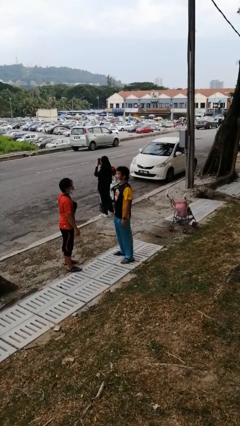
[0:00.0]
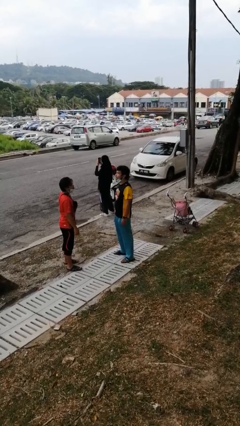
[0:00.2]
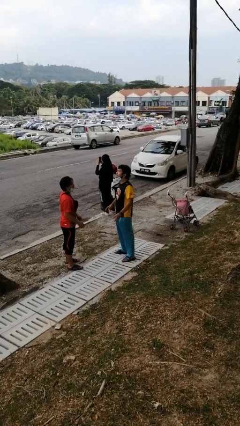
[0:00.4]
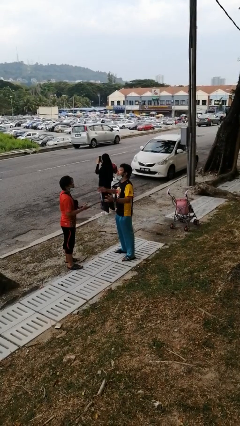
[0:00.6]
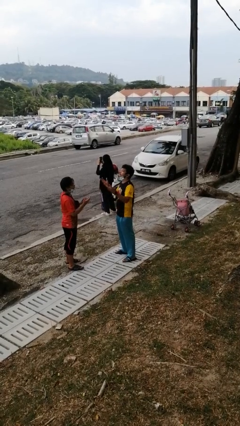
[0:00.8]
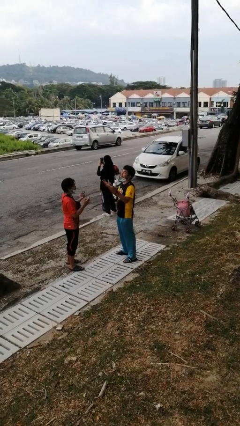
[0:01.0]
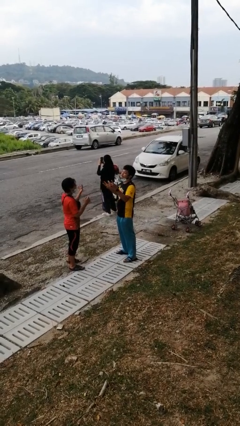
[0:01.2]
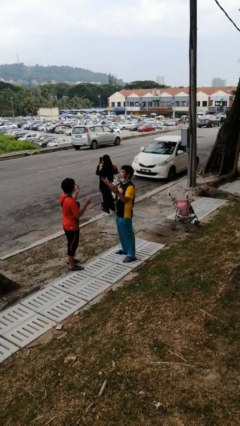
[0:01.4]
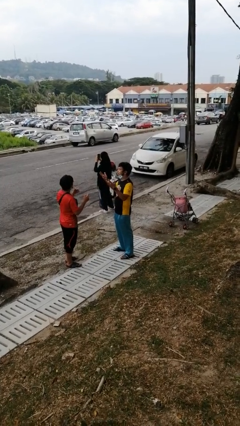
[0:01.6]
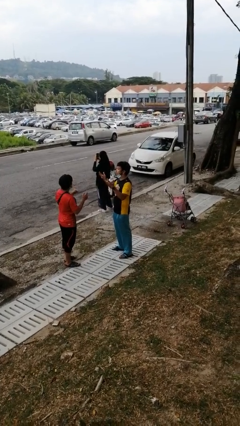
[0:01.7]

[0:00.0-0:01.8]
person talks to person

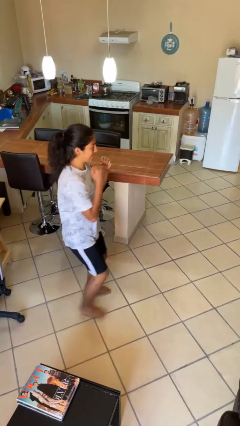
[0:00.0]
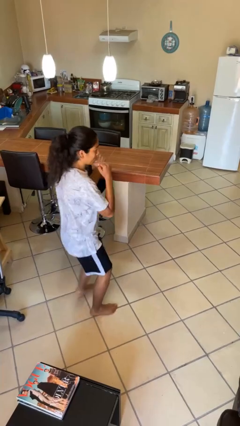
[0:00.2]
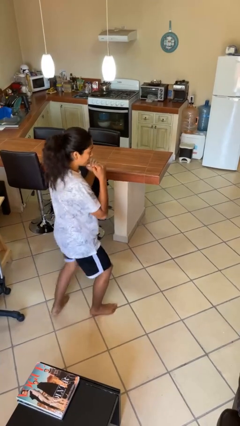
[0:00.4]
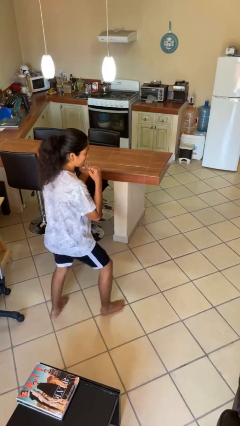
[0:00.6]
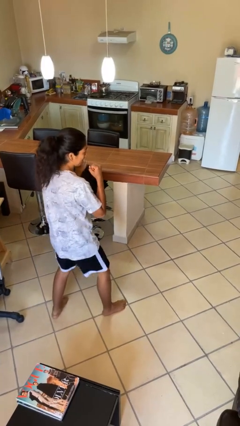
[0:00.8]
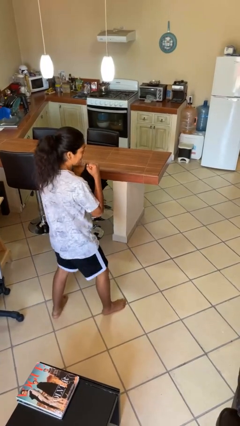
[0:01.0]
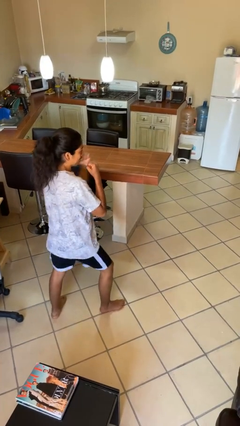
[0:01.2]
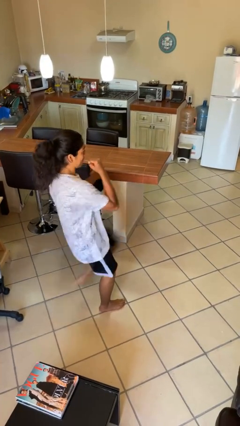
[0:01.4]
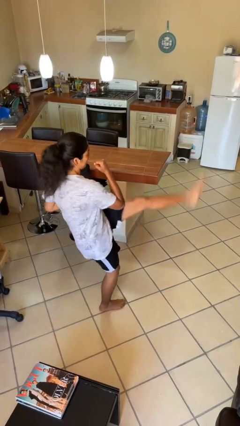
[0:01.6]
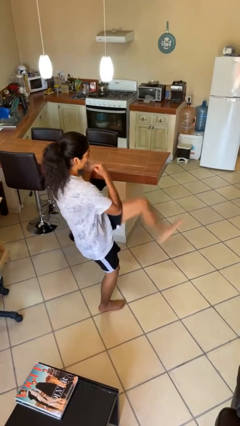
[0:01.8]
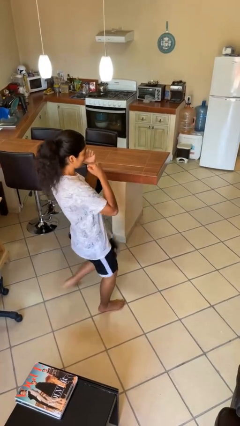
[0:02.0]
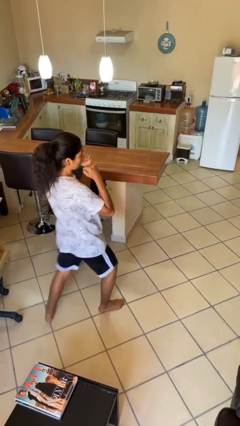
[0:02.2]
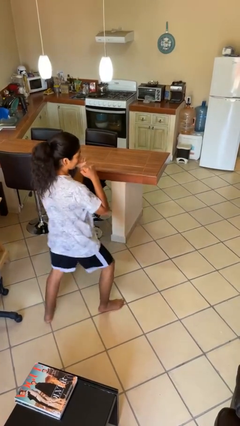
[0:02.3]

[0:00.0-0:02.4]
person karate kicks

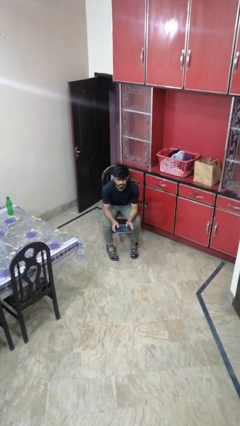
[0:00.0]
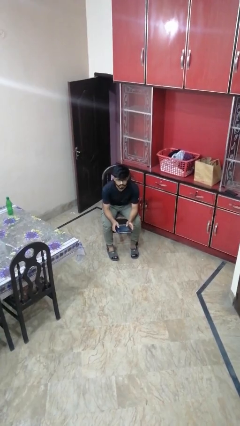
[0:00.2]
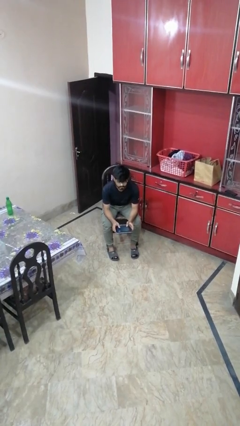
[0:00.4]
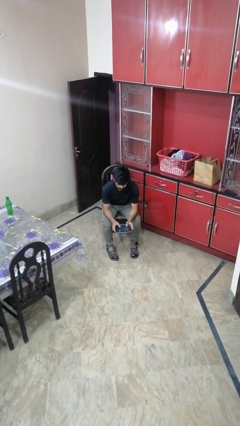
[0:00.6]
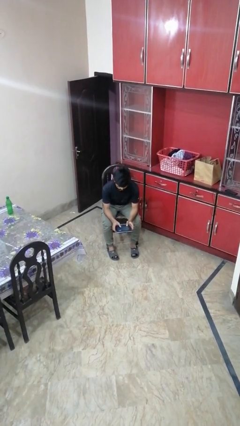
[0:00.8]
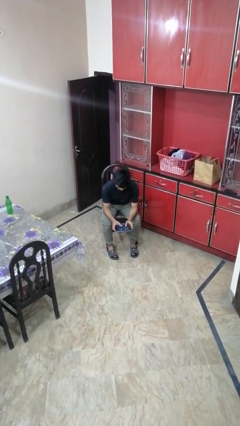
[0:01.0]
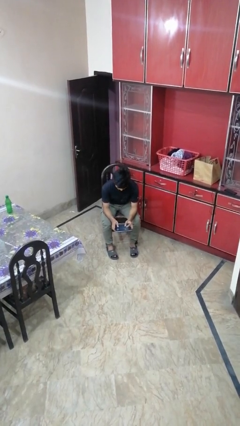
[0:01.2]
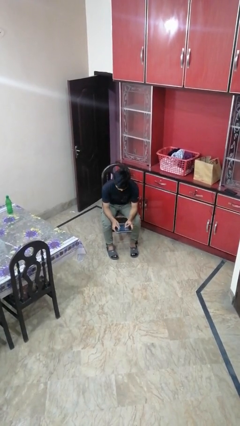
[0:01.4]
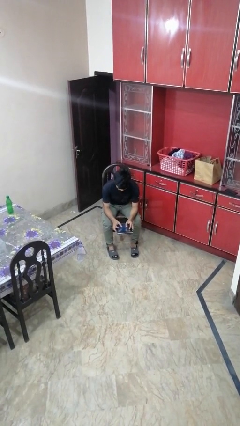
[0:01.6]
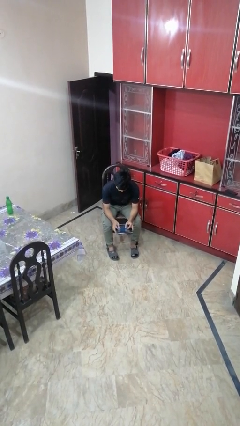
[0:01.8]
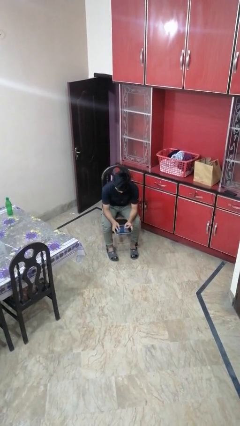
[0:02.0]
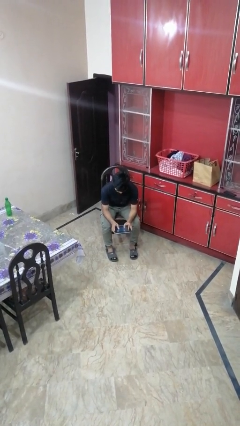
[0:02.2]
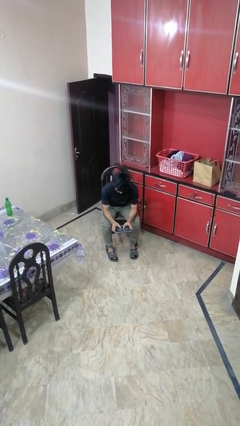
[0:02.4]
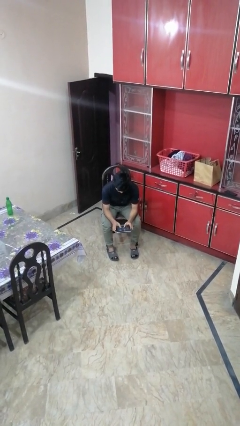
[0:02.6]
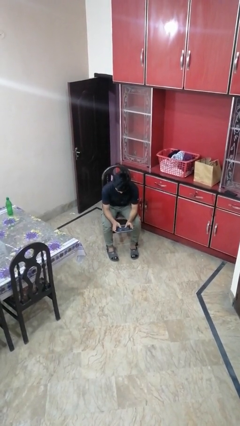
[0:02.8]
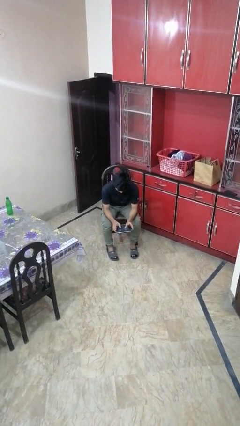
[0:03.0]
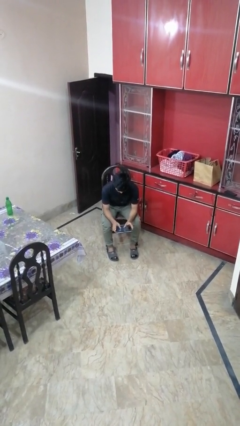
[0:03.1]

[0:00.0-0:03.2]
person interacts with tablet

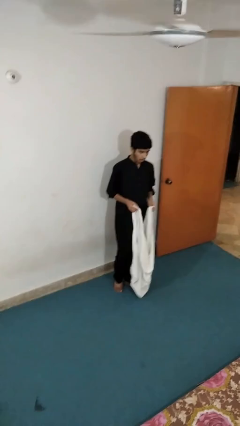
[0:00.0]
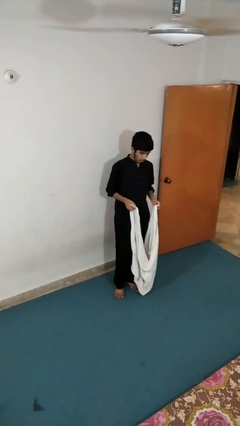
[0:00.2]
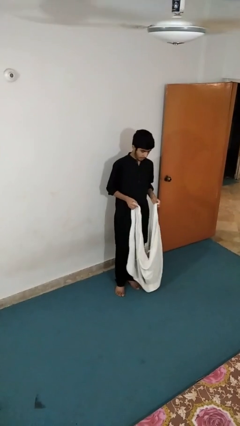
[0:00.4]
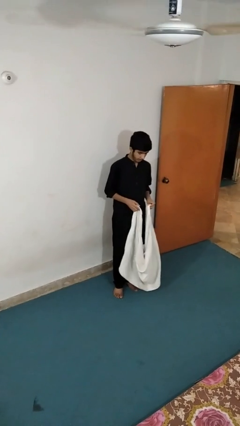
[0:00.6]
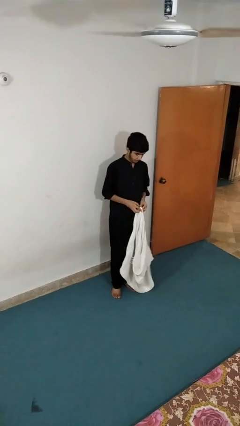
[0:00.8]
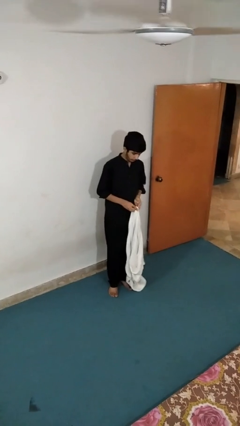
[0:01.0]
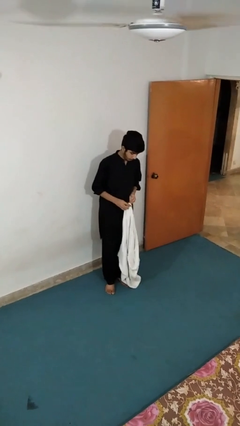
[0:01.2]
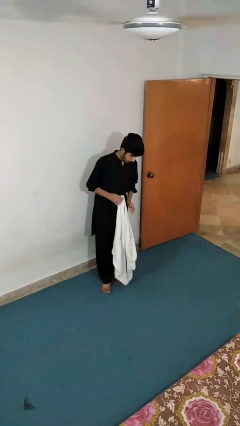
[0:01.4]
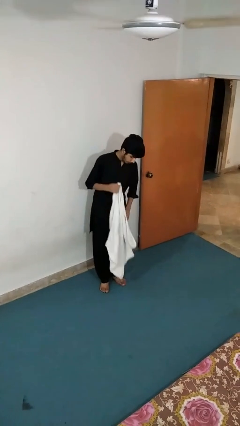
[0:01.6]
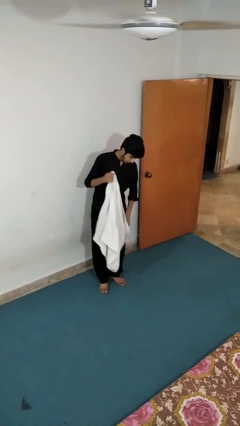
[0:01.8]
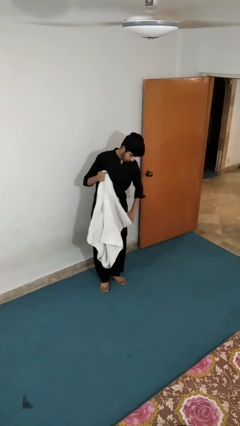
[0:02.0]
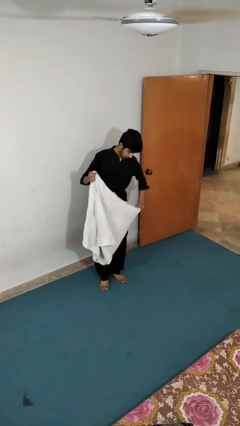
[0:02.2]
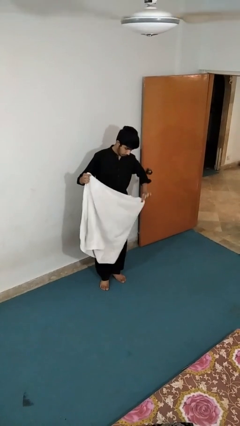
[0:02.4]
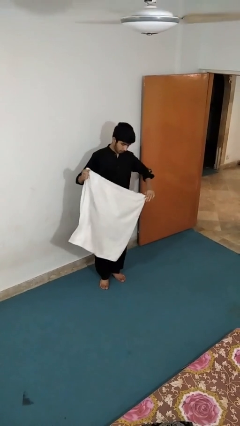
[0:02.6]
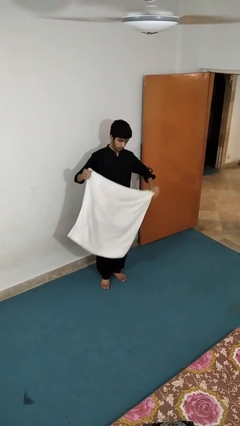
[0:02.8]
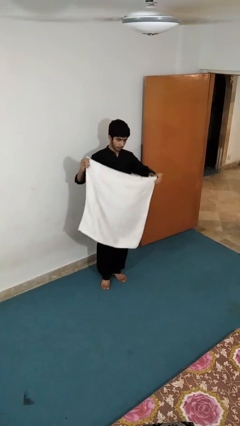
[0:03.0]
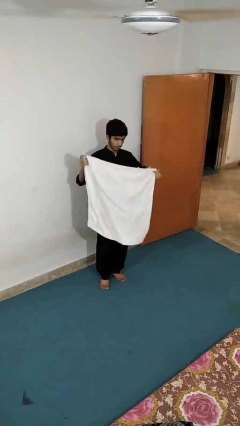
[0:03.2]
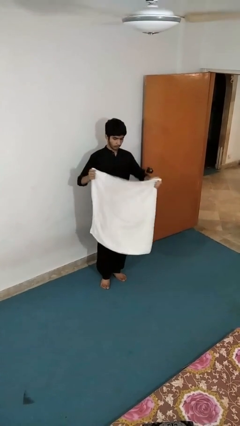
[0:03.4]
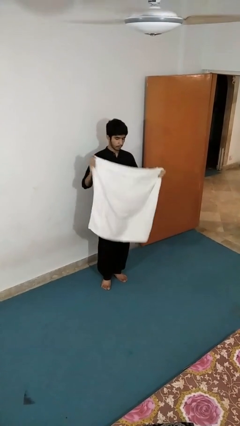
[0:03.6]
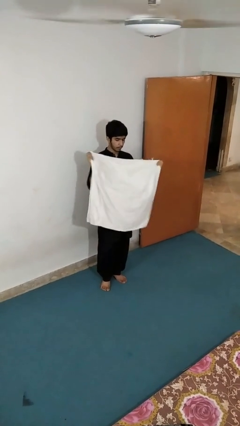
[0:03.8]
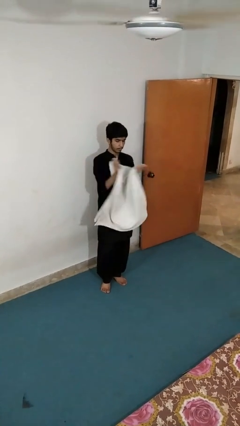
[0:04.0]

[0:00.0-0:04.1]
person folds towel

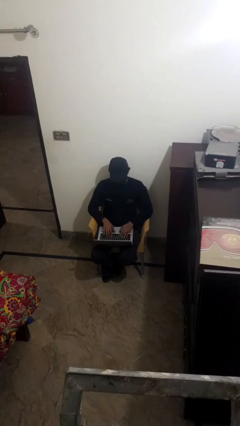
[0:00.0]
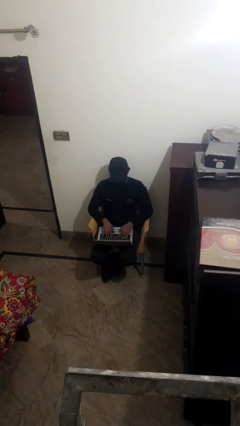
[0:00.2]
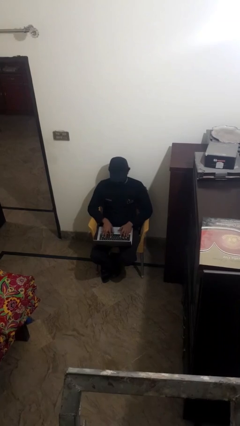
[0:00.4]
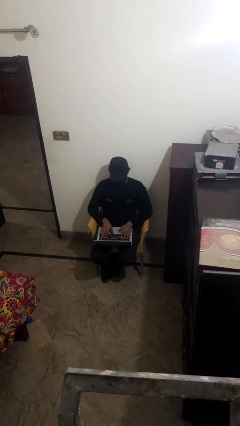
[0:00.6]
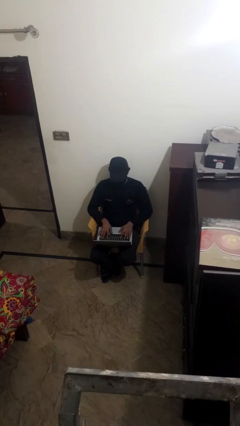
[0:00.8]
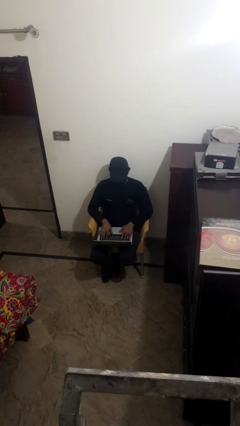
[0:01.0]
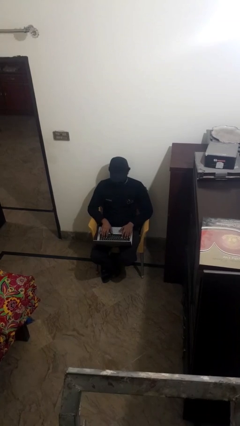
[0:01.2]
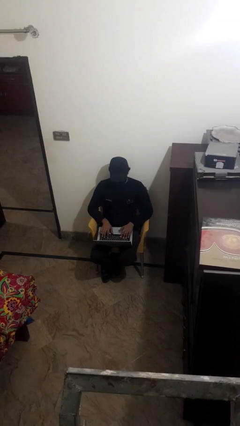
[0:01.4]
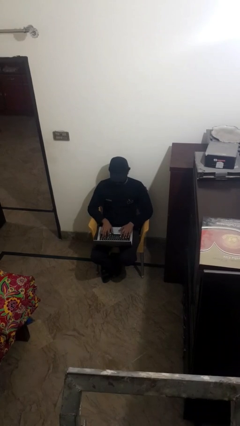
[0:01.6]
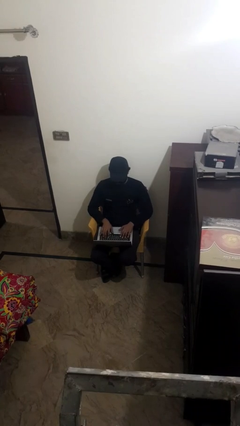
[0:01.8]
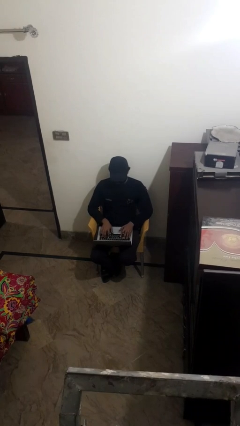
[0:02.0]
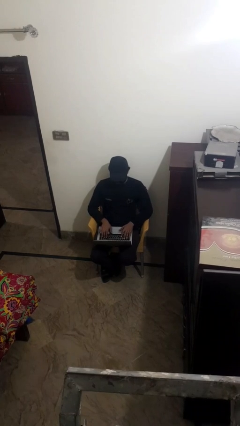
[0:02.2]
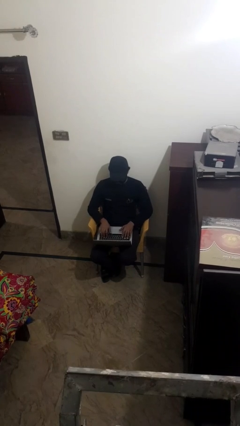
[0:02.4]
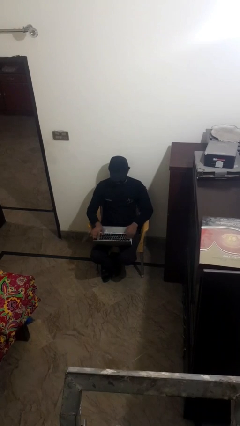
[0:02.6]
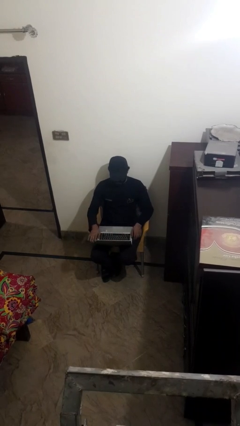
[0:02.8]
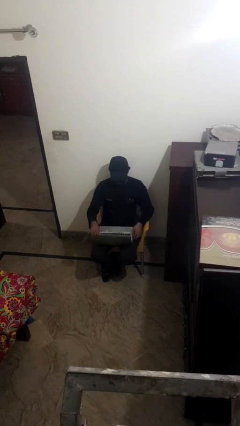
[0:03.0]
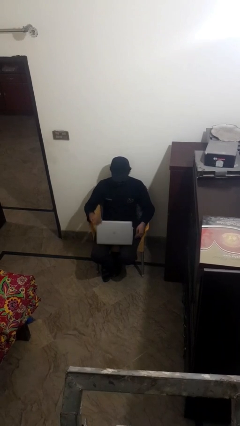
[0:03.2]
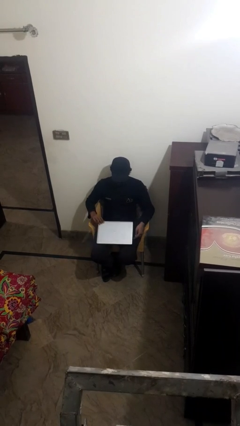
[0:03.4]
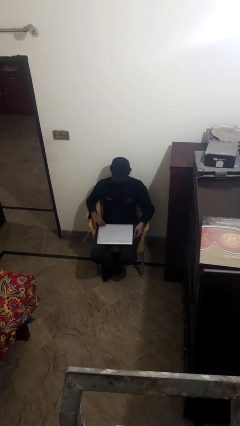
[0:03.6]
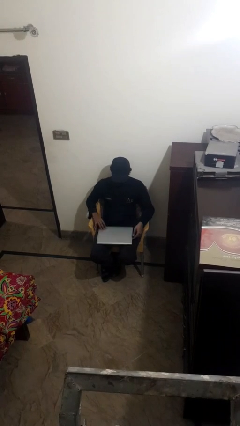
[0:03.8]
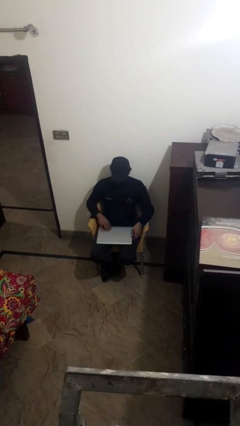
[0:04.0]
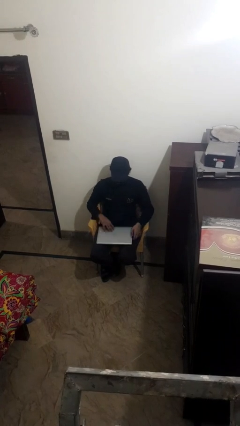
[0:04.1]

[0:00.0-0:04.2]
person interacts with laptop

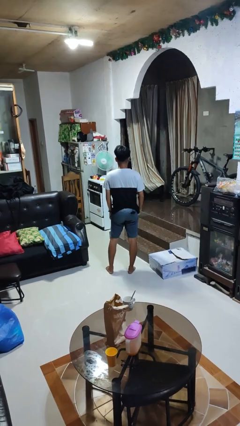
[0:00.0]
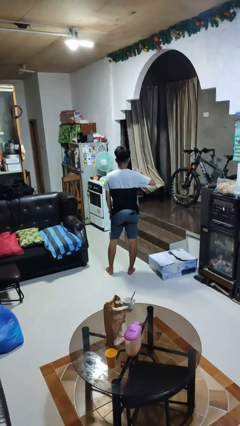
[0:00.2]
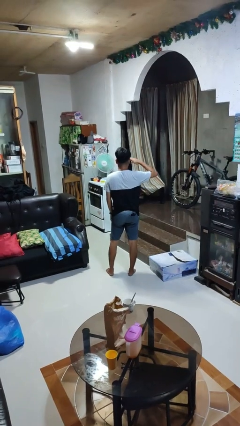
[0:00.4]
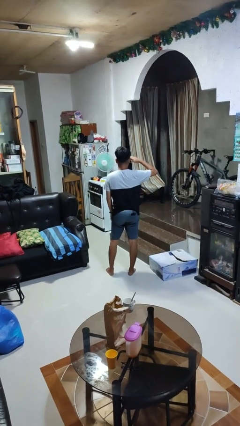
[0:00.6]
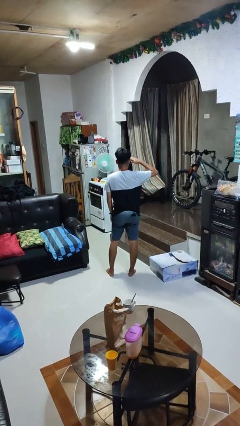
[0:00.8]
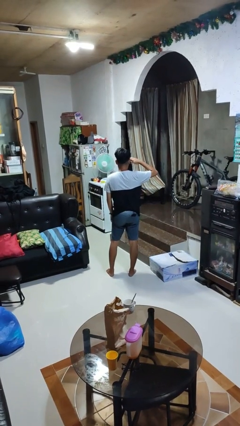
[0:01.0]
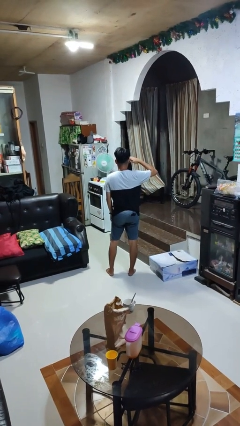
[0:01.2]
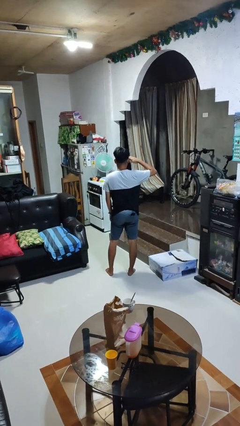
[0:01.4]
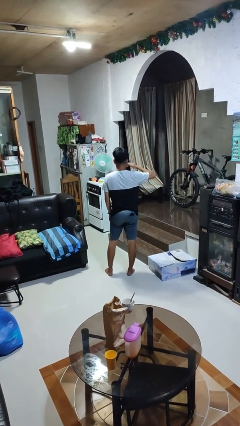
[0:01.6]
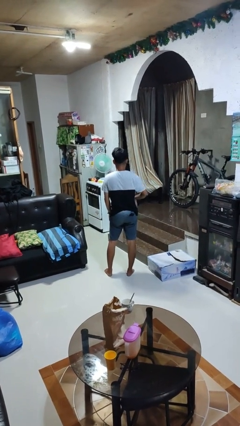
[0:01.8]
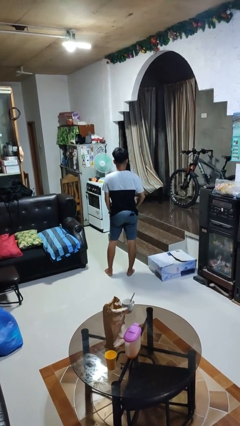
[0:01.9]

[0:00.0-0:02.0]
person salutes
